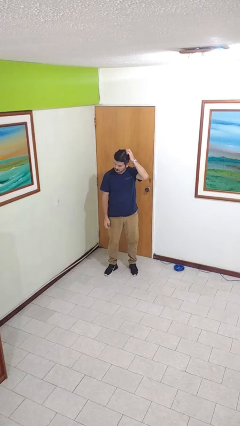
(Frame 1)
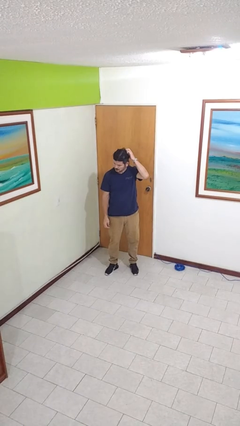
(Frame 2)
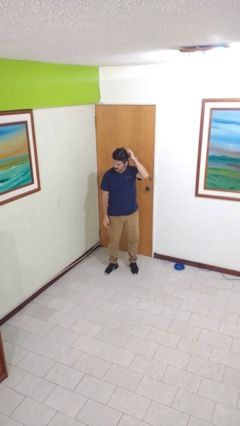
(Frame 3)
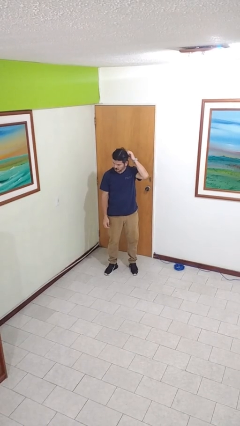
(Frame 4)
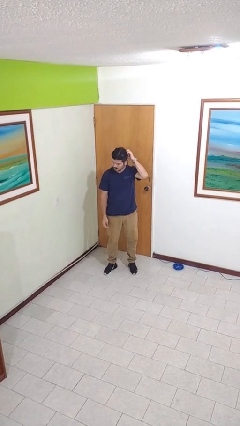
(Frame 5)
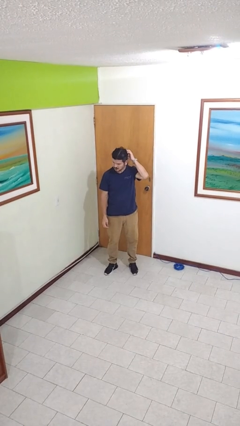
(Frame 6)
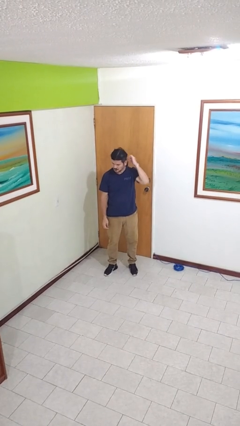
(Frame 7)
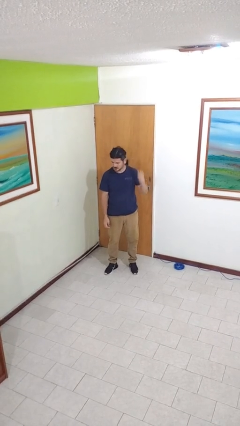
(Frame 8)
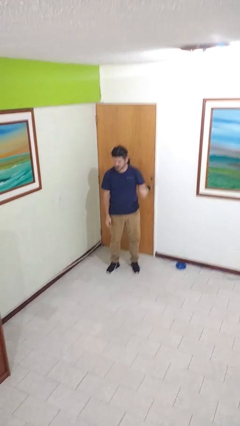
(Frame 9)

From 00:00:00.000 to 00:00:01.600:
person scratches face

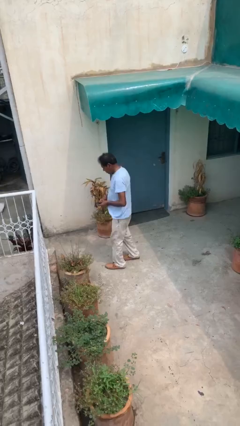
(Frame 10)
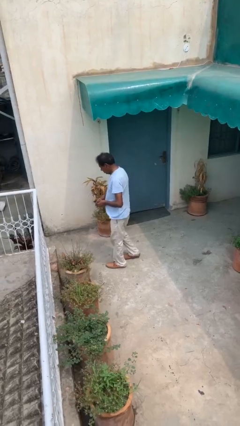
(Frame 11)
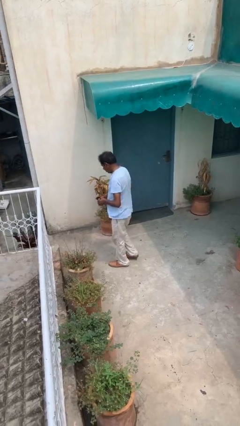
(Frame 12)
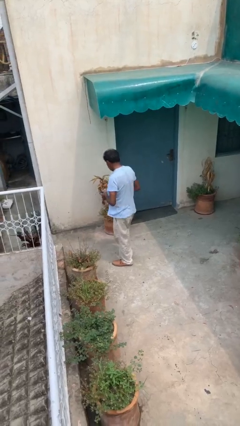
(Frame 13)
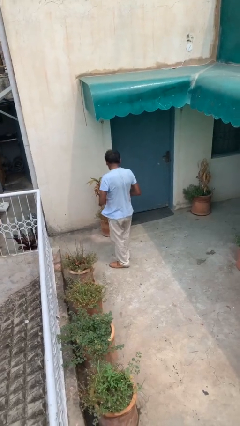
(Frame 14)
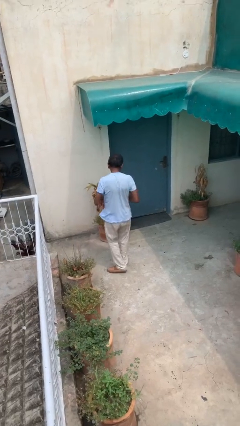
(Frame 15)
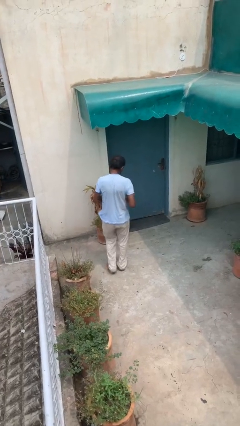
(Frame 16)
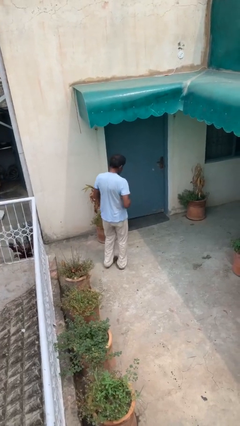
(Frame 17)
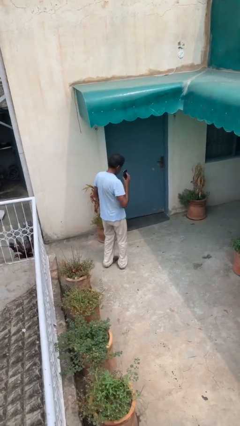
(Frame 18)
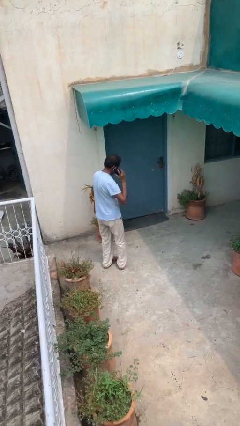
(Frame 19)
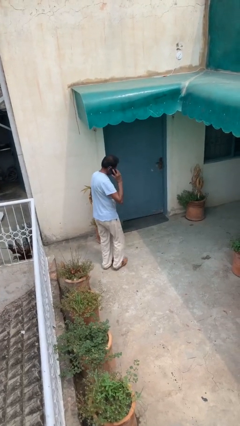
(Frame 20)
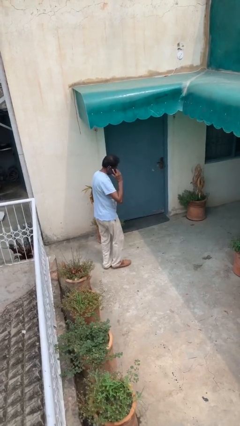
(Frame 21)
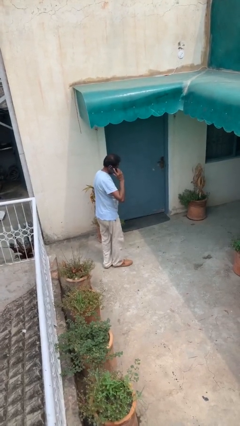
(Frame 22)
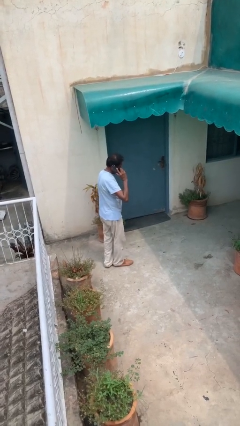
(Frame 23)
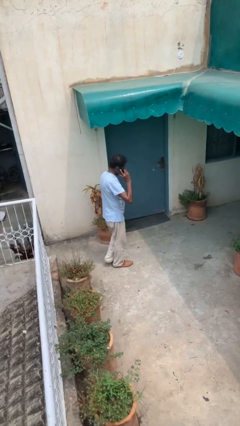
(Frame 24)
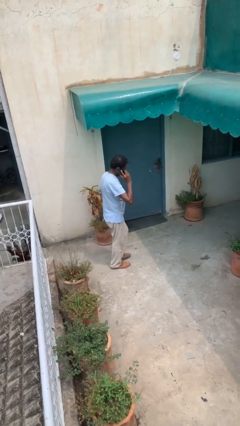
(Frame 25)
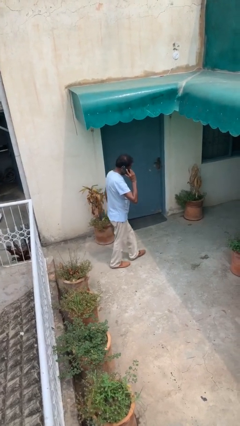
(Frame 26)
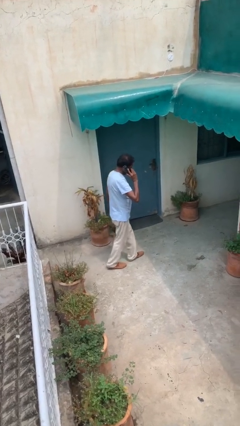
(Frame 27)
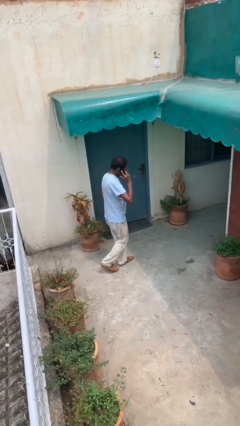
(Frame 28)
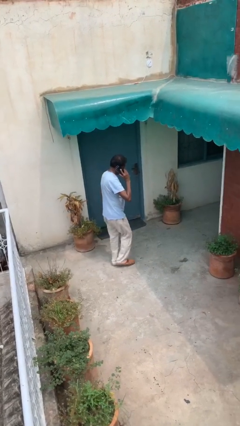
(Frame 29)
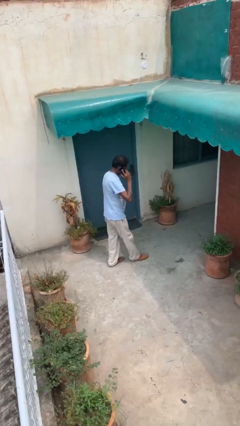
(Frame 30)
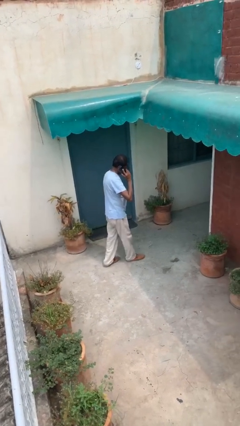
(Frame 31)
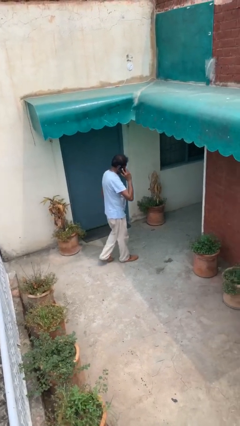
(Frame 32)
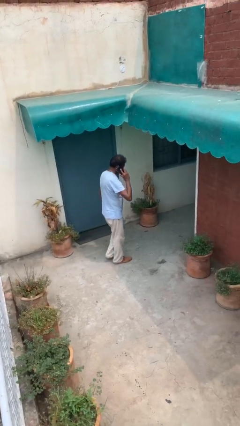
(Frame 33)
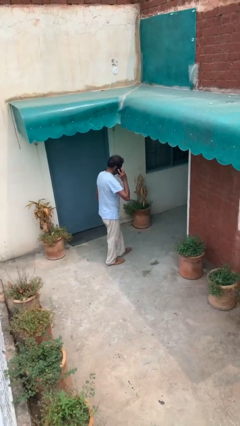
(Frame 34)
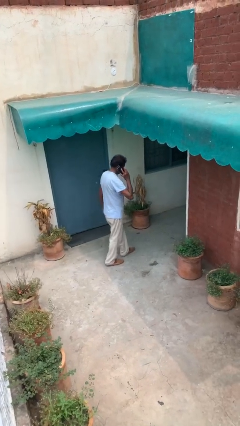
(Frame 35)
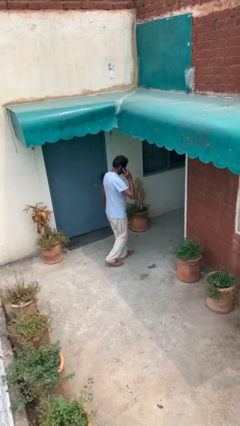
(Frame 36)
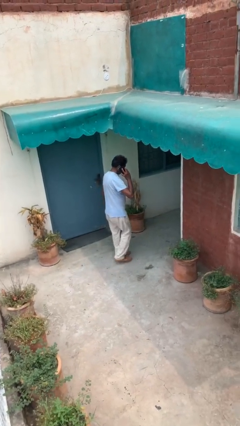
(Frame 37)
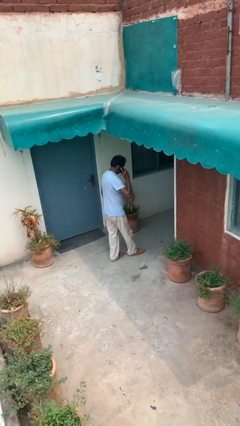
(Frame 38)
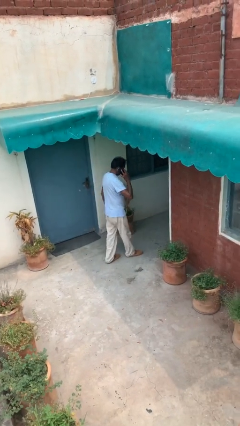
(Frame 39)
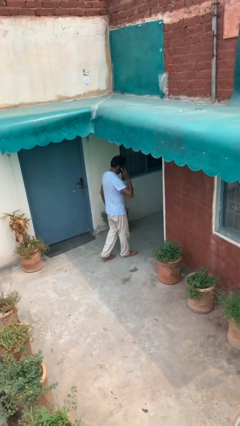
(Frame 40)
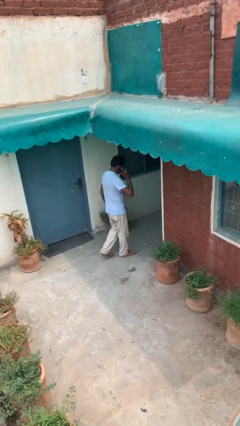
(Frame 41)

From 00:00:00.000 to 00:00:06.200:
person talks on phone

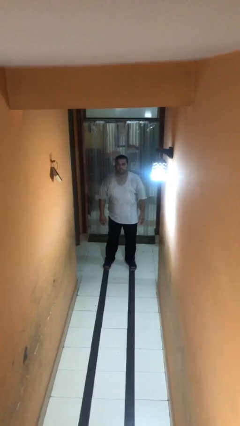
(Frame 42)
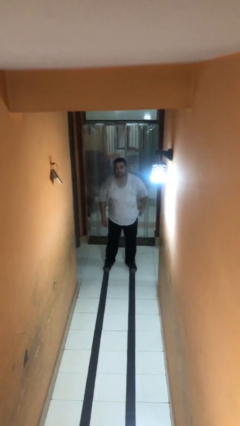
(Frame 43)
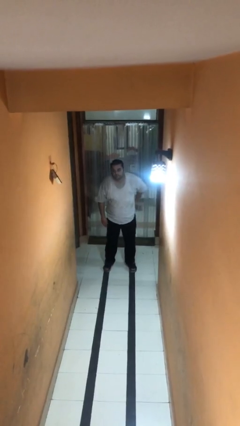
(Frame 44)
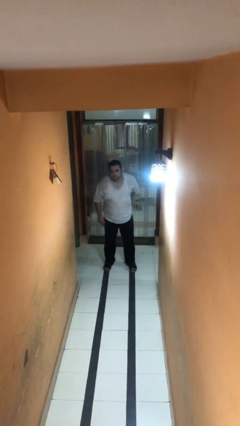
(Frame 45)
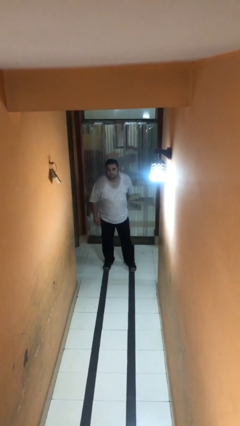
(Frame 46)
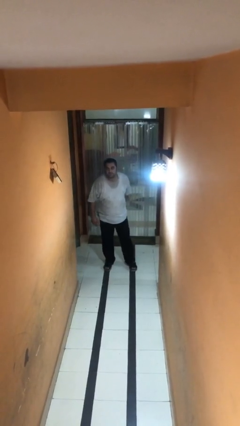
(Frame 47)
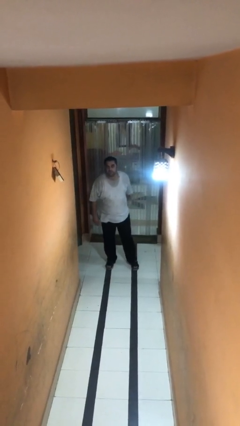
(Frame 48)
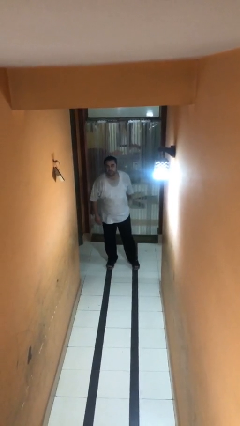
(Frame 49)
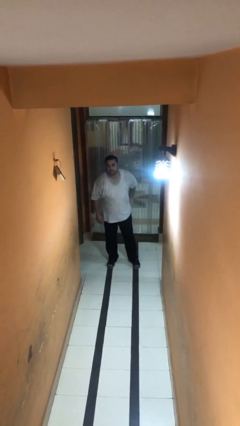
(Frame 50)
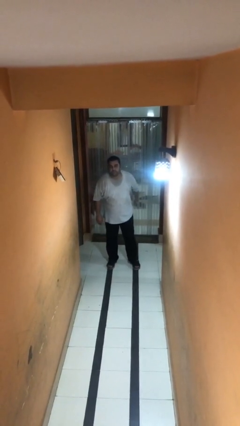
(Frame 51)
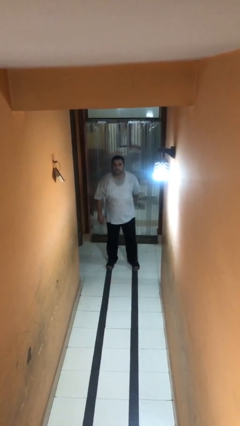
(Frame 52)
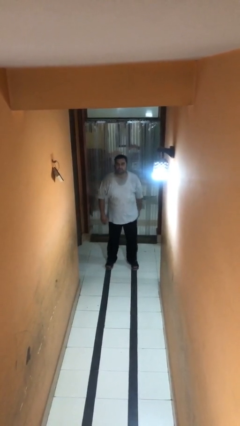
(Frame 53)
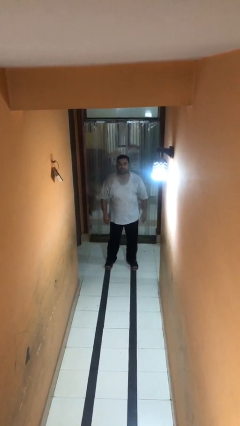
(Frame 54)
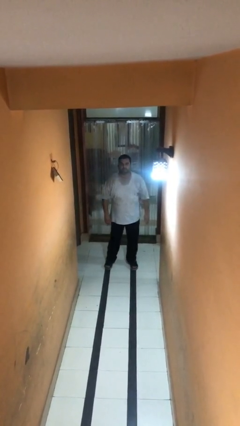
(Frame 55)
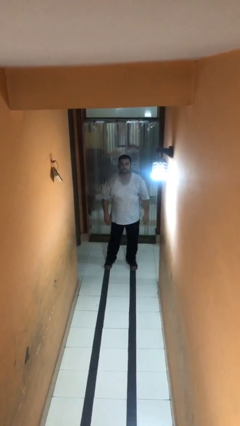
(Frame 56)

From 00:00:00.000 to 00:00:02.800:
person puts hands in back pockets

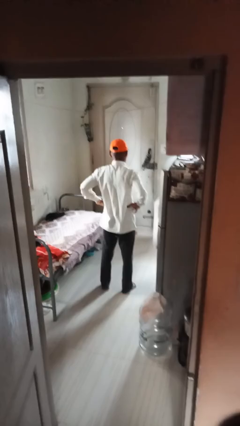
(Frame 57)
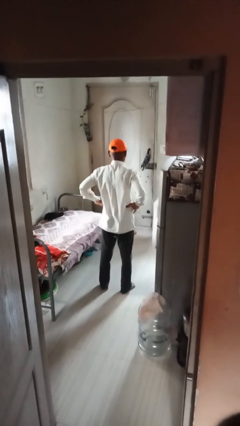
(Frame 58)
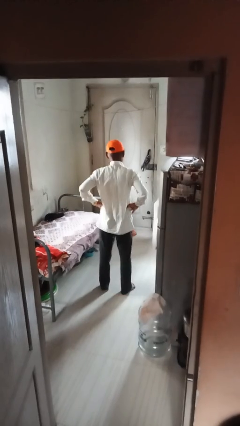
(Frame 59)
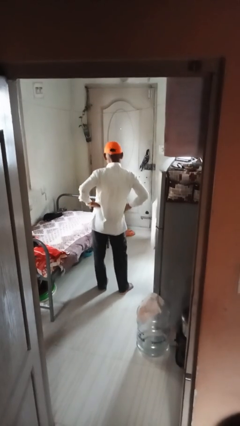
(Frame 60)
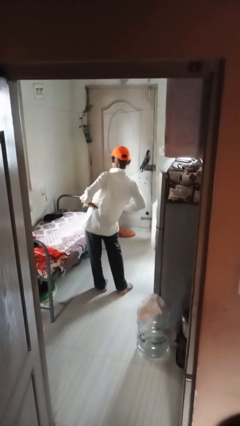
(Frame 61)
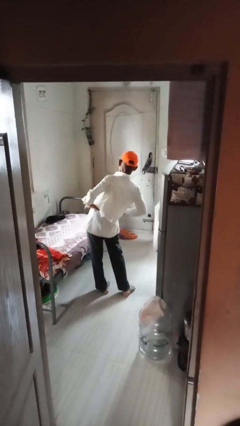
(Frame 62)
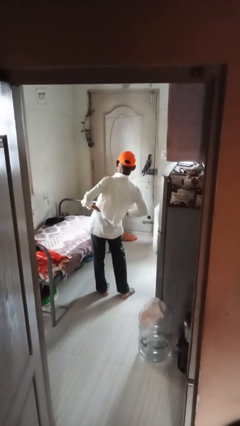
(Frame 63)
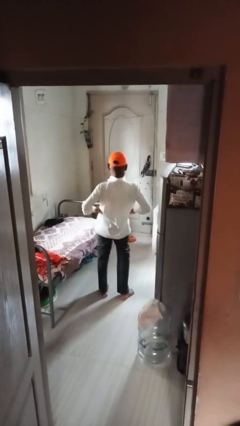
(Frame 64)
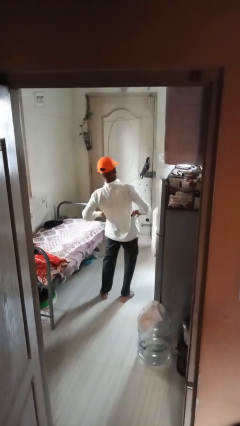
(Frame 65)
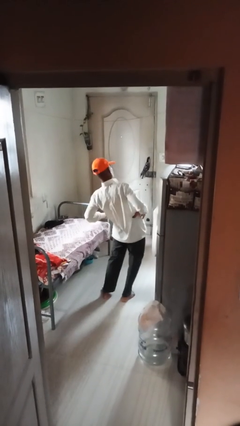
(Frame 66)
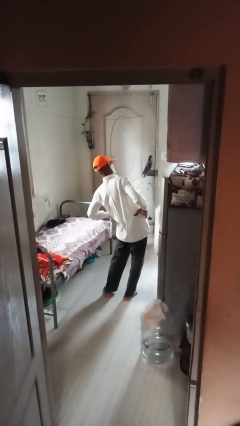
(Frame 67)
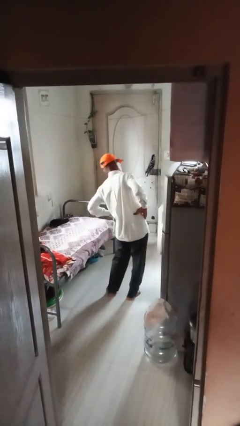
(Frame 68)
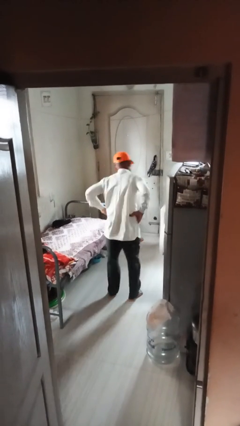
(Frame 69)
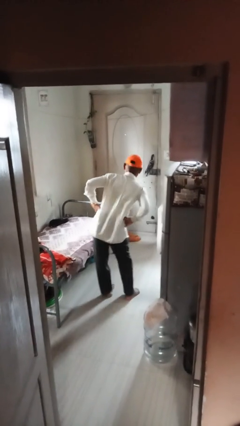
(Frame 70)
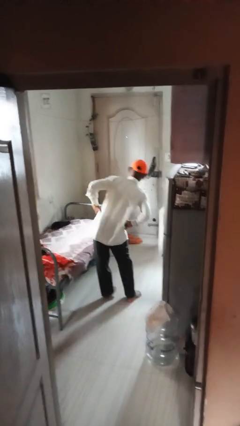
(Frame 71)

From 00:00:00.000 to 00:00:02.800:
person wiggles hips

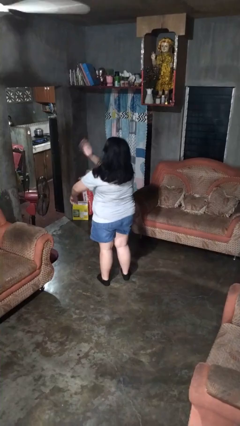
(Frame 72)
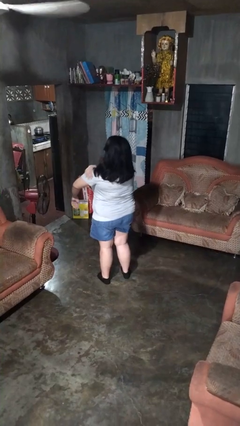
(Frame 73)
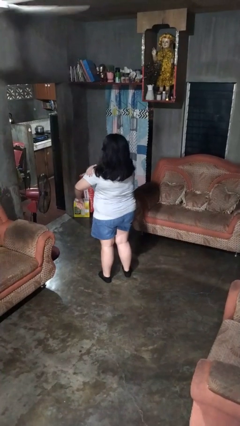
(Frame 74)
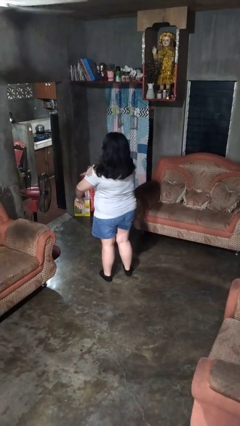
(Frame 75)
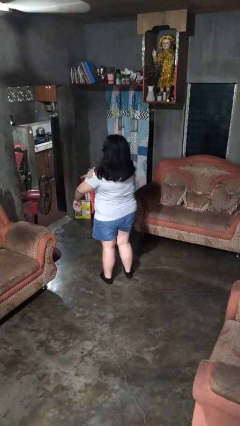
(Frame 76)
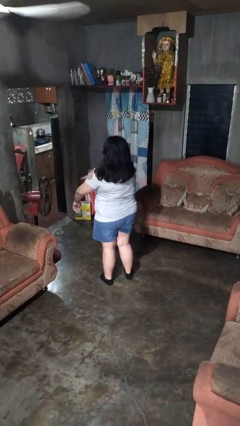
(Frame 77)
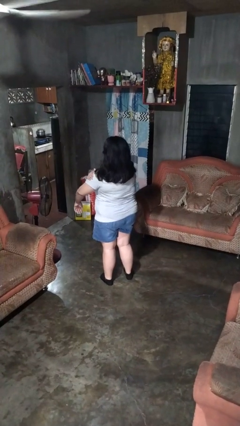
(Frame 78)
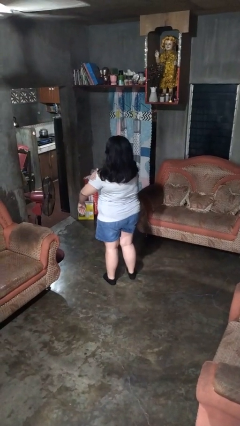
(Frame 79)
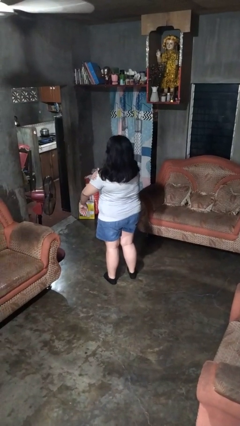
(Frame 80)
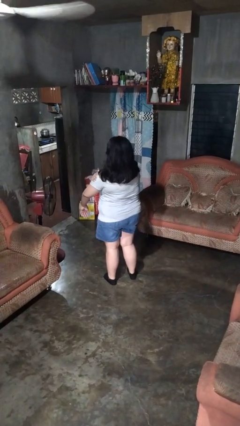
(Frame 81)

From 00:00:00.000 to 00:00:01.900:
person swats bug

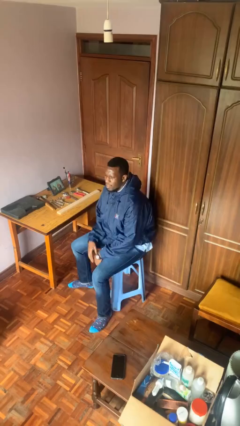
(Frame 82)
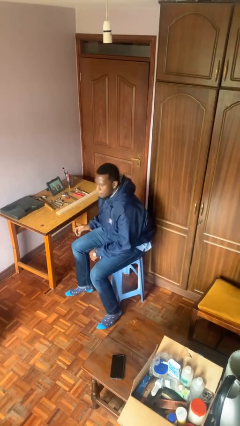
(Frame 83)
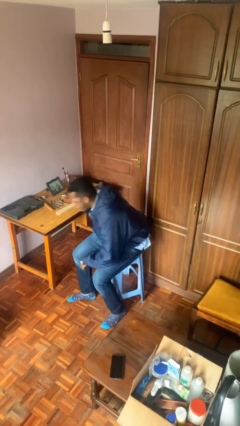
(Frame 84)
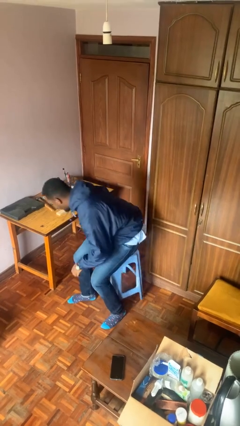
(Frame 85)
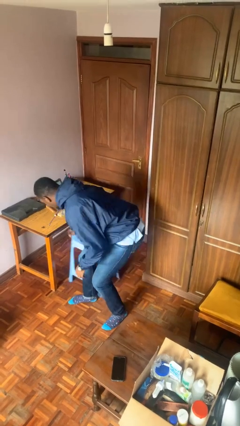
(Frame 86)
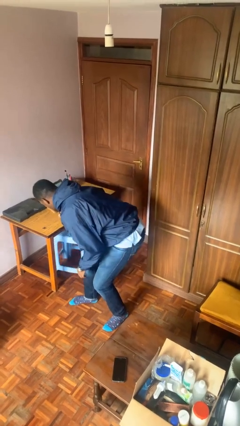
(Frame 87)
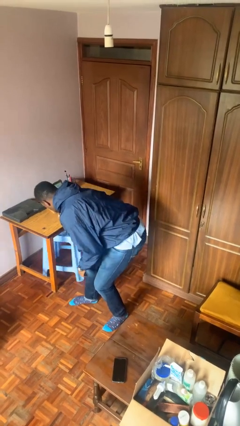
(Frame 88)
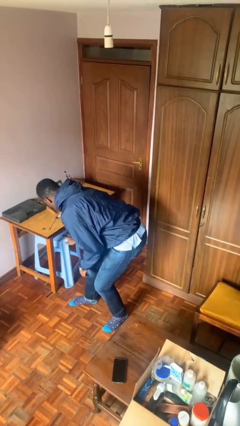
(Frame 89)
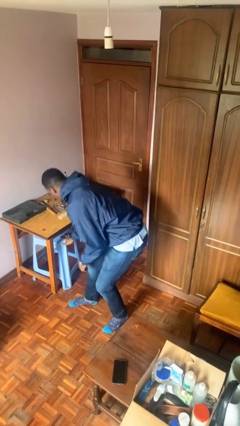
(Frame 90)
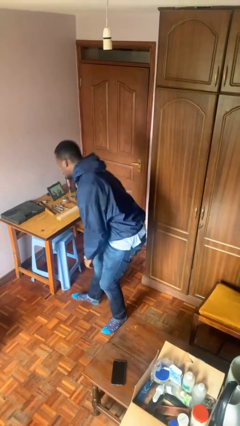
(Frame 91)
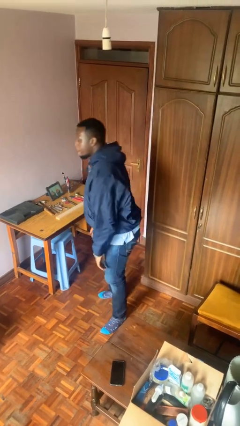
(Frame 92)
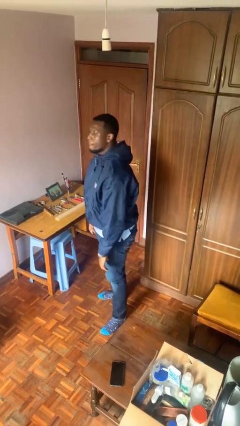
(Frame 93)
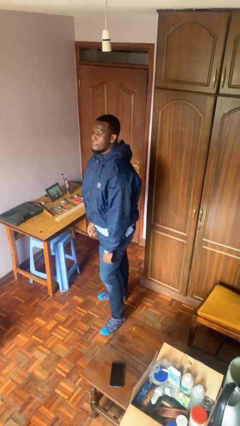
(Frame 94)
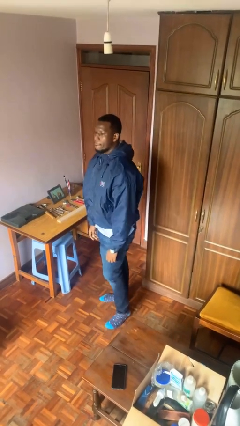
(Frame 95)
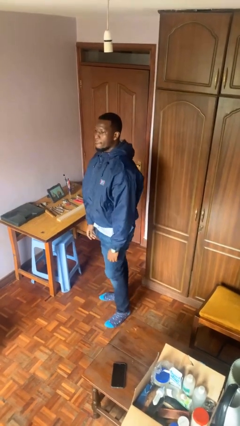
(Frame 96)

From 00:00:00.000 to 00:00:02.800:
person stands up
